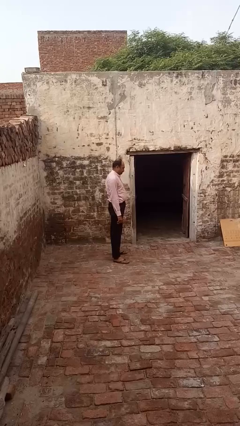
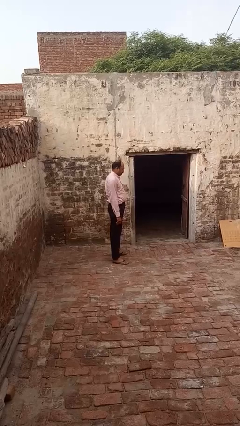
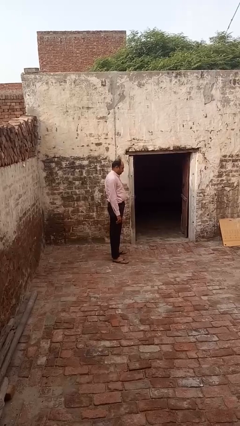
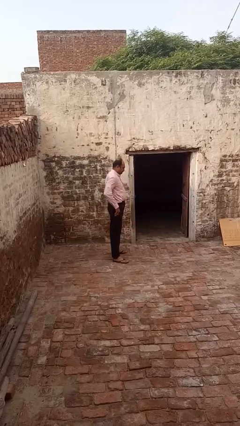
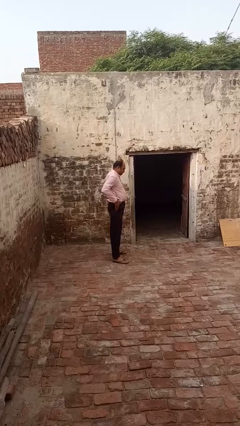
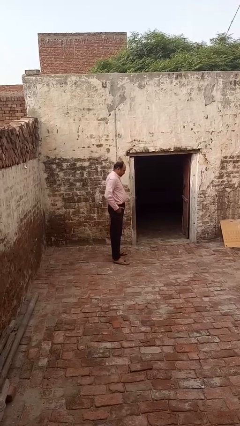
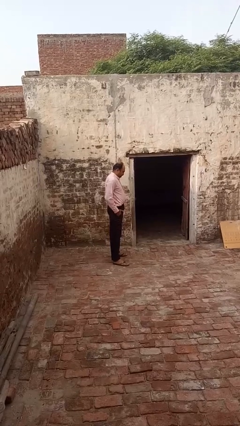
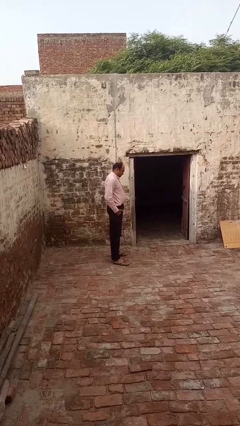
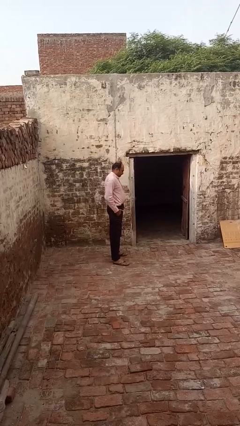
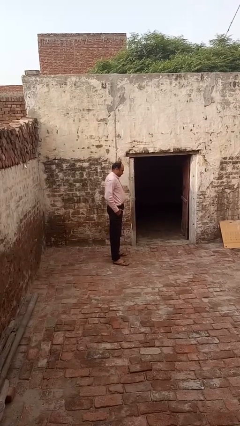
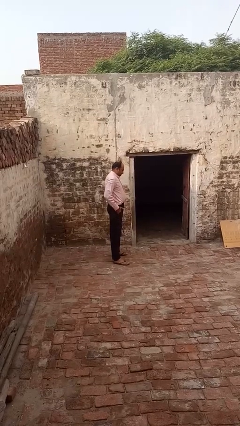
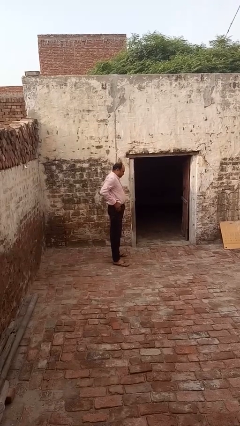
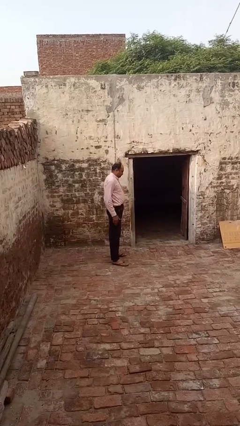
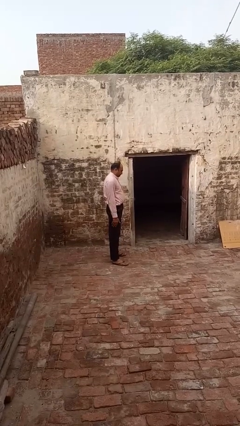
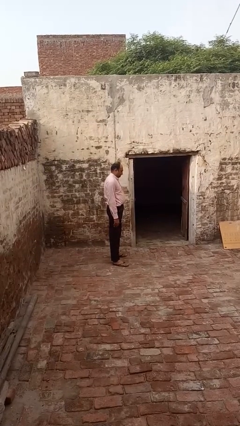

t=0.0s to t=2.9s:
person puts hands in back pockets

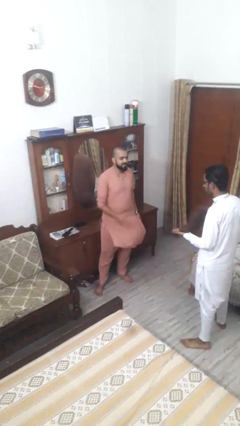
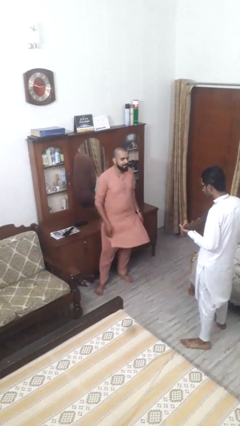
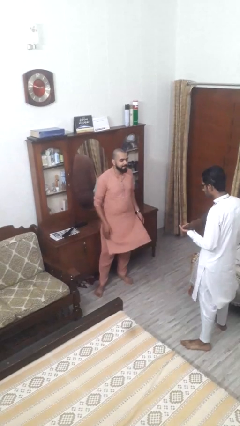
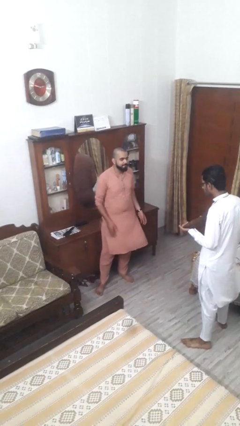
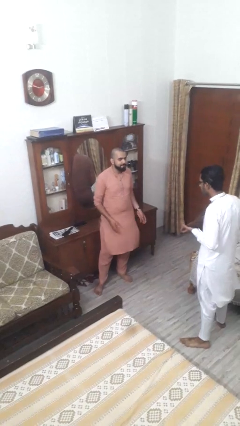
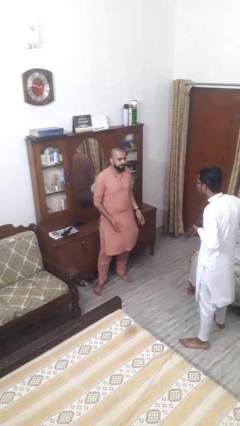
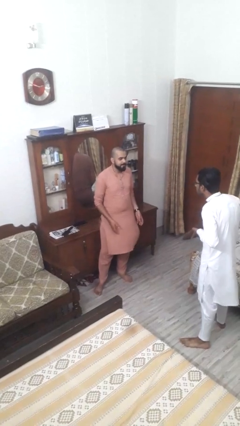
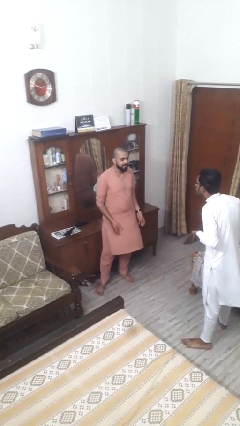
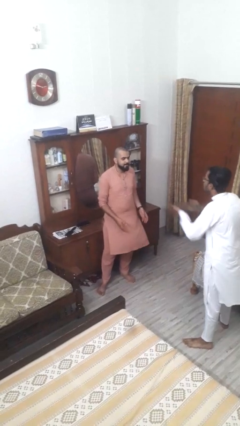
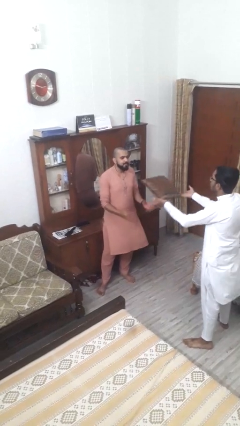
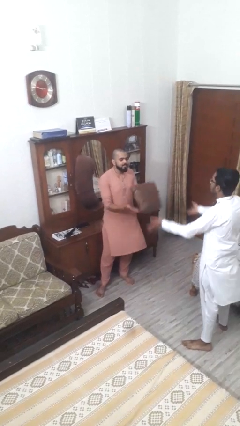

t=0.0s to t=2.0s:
person throws object to person

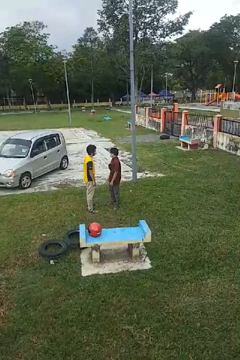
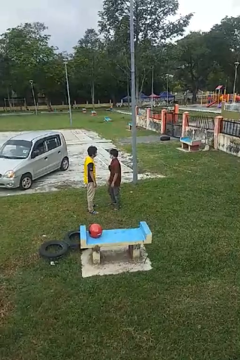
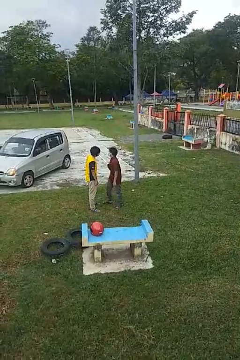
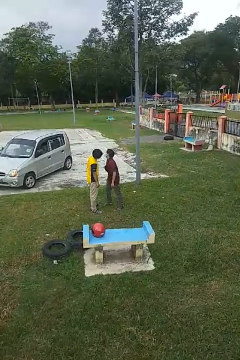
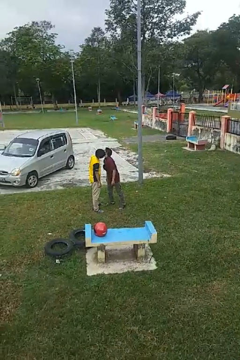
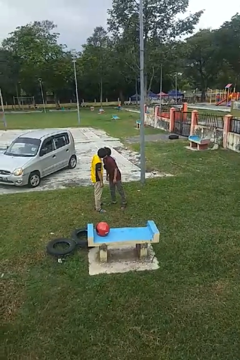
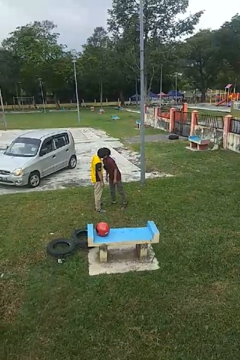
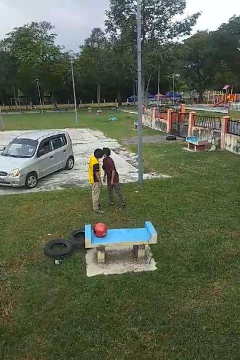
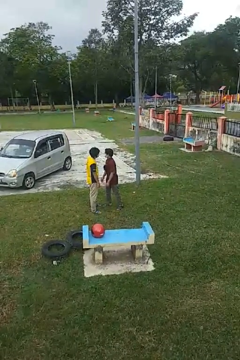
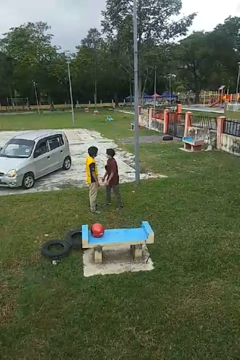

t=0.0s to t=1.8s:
person kisses cheek of person

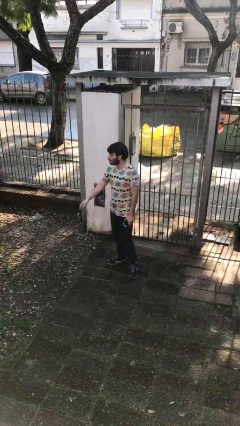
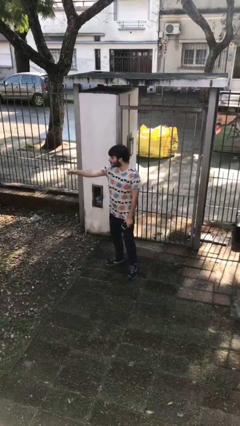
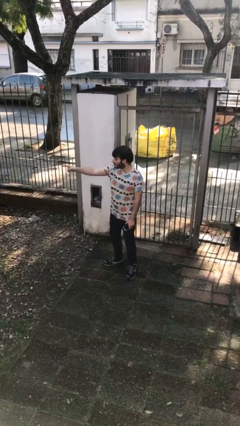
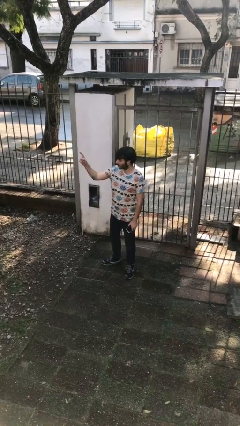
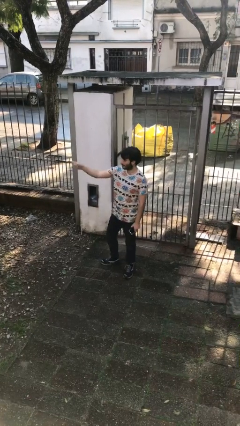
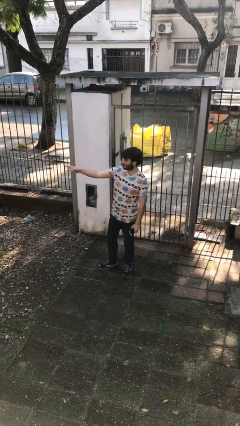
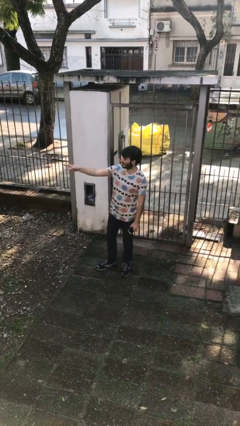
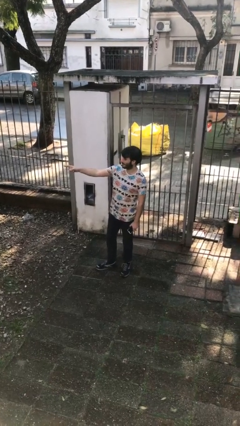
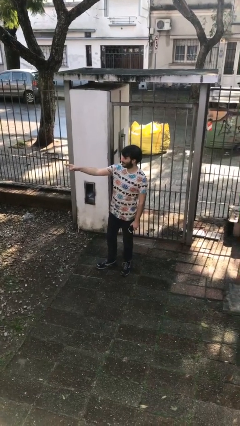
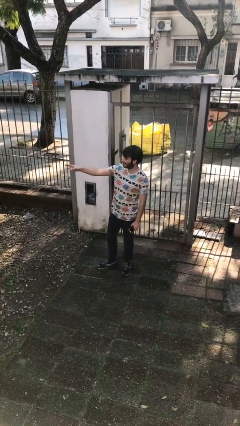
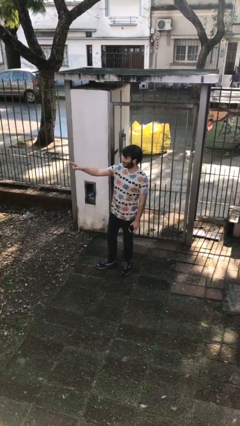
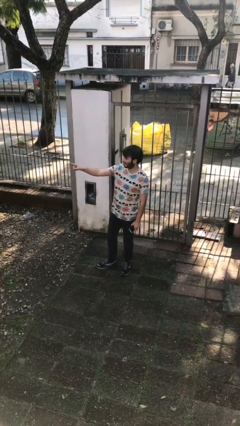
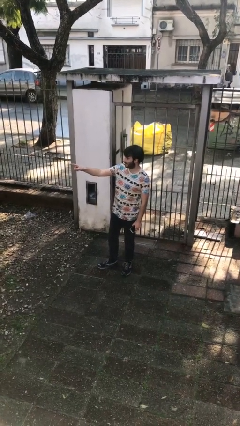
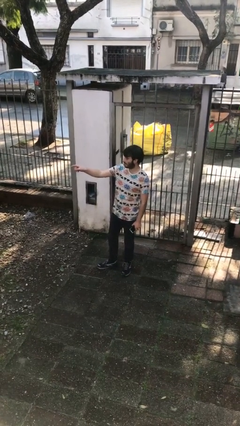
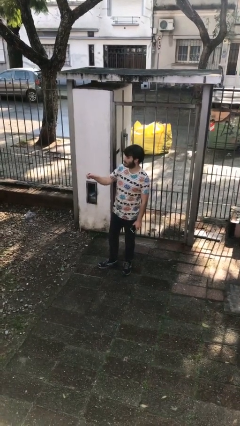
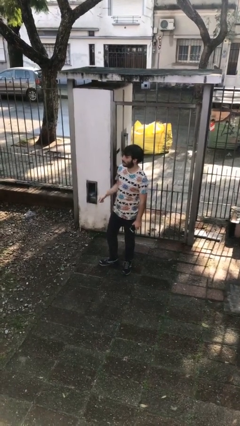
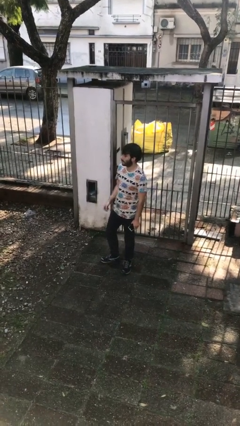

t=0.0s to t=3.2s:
person points at person

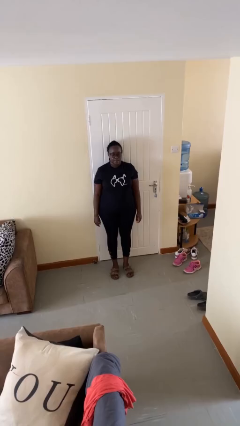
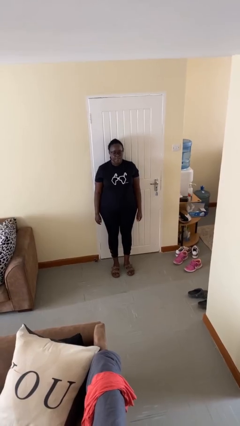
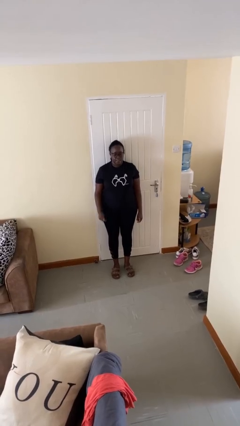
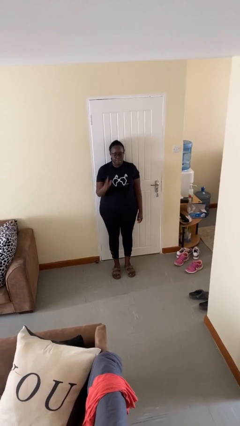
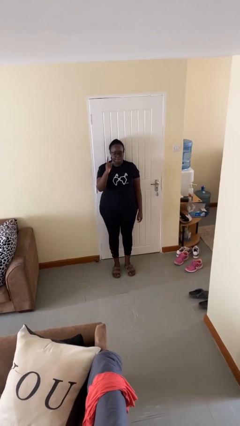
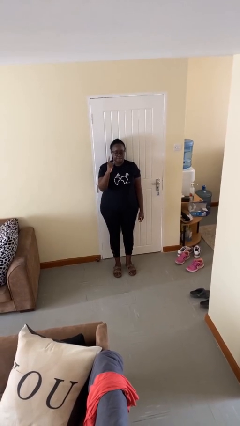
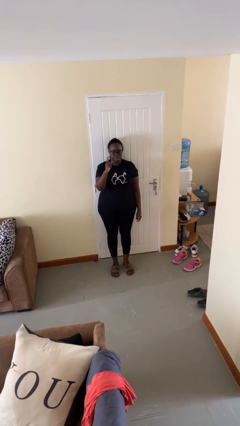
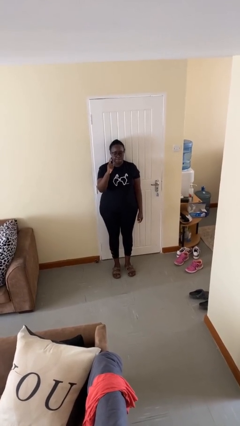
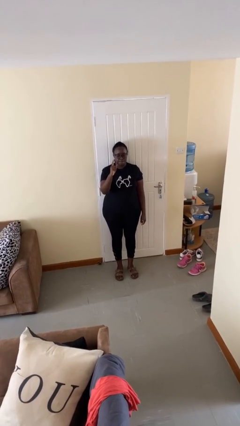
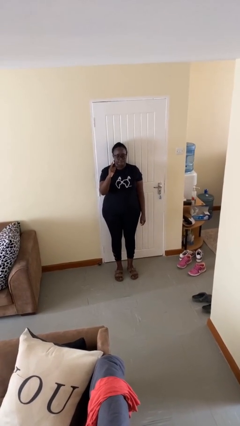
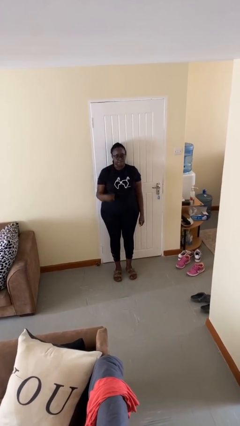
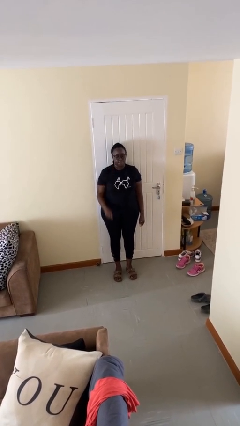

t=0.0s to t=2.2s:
person gestures number one

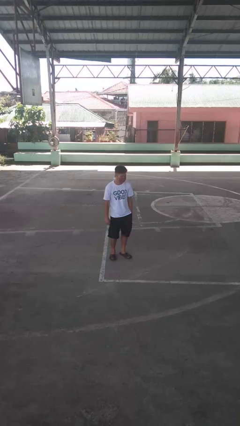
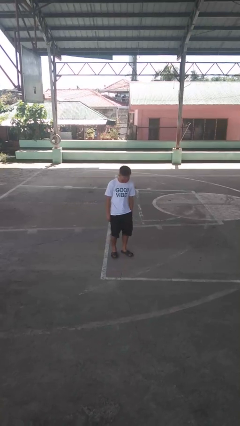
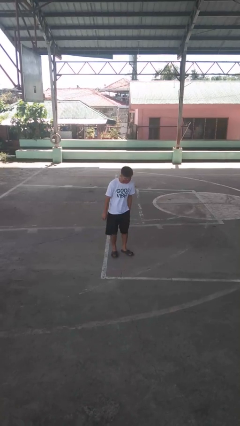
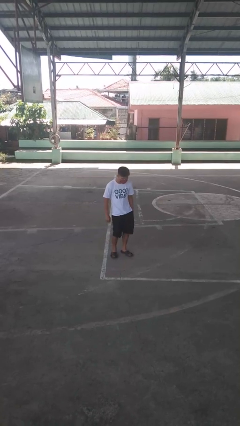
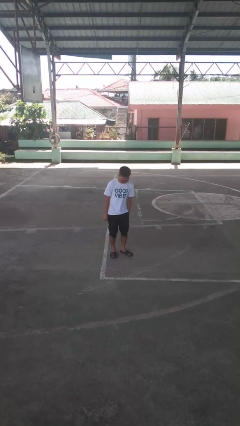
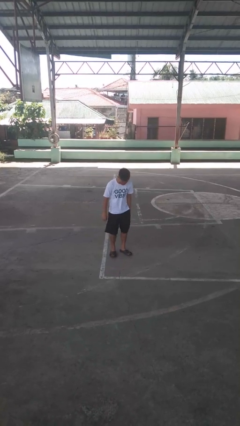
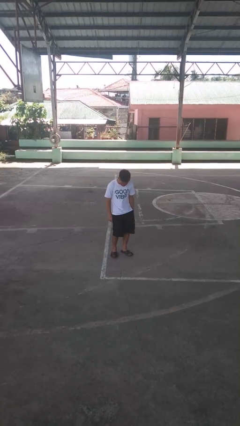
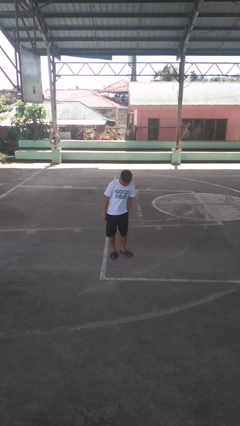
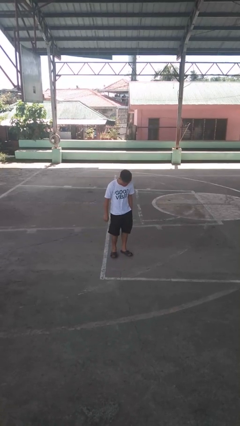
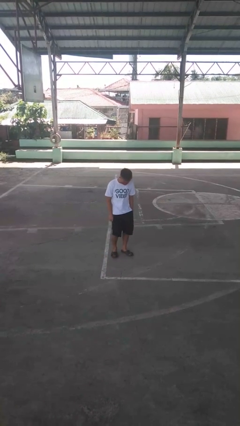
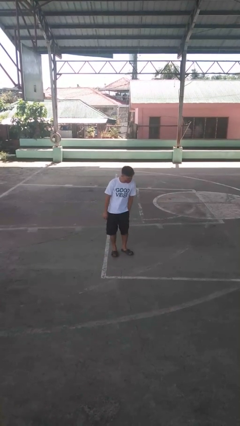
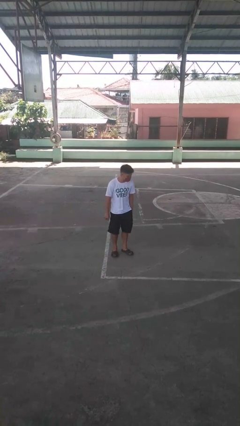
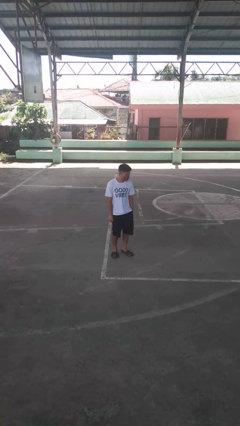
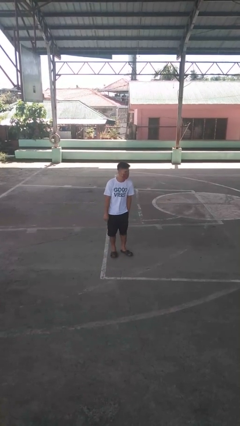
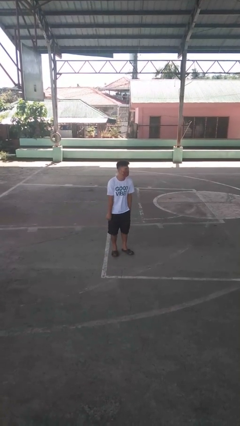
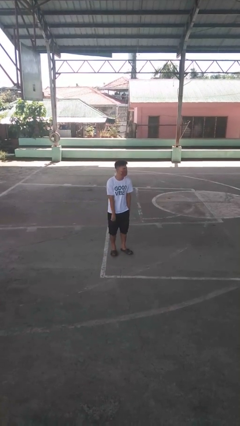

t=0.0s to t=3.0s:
person wiggles hips

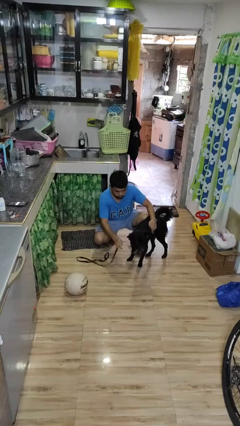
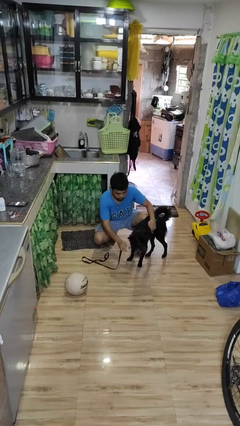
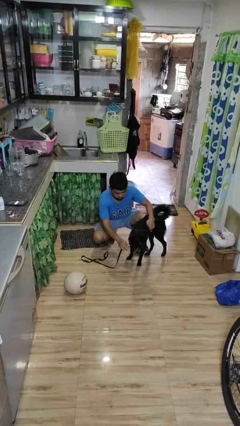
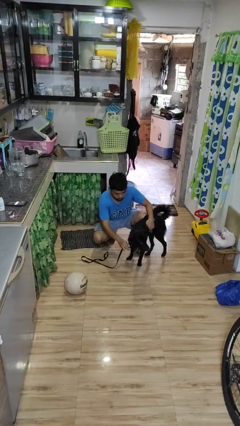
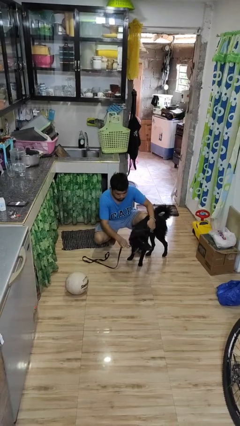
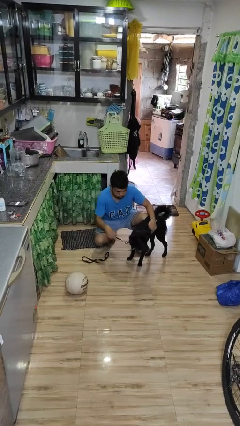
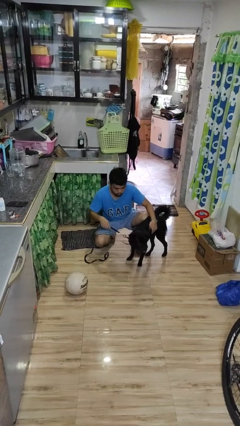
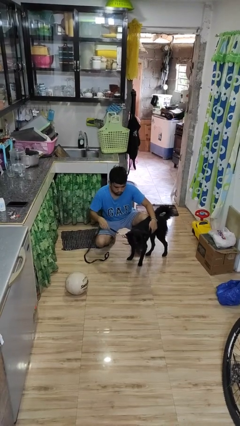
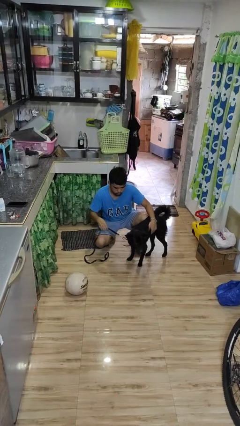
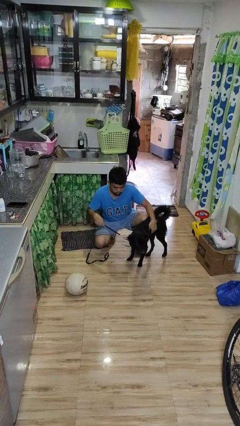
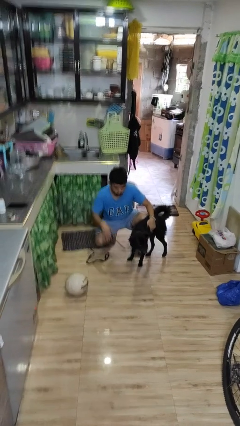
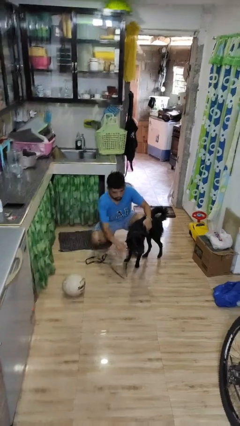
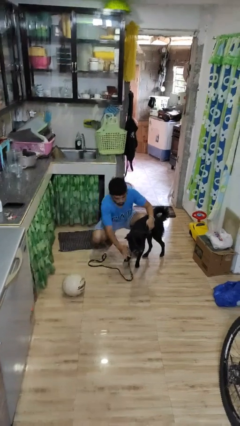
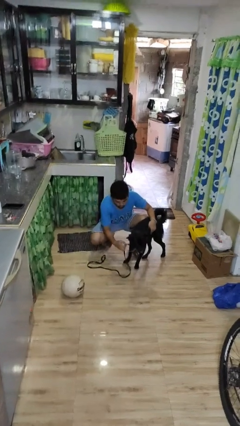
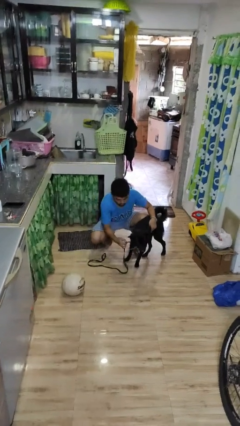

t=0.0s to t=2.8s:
person attaches leash to dog
